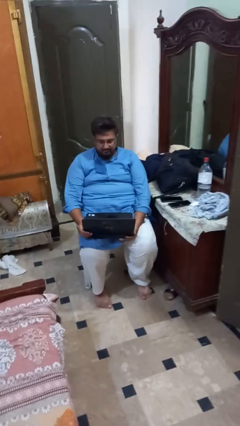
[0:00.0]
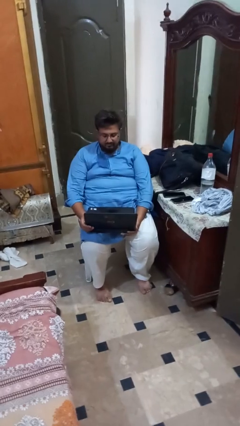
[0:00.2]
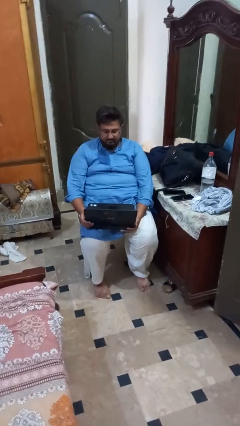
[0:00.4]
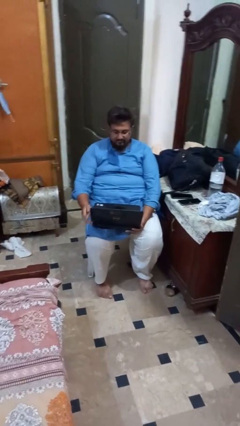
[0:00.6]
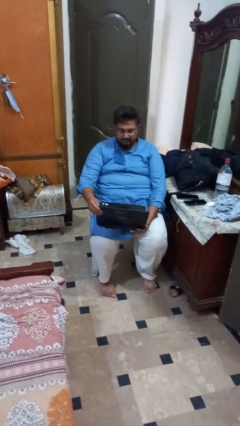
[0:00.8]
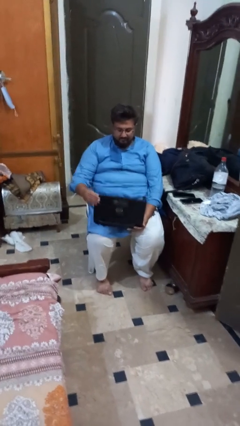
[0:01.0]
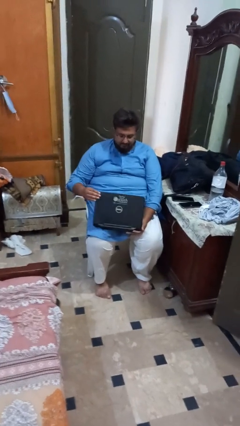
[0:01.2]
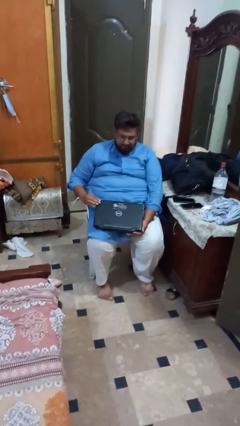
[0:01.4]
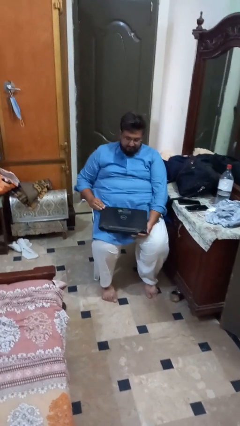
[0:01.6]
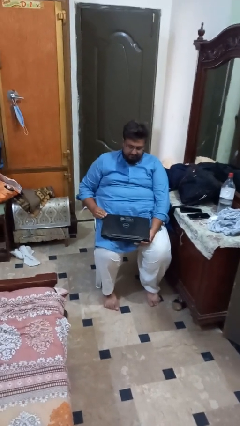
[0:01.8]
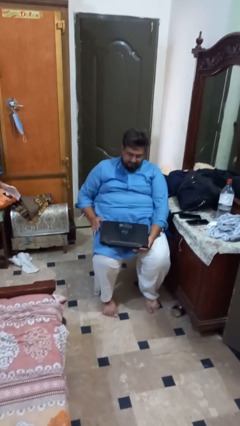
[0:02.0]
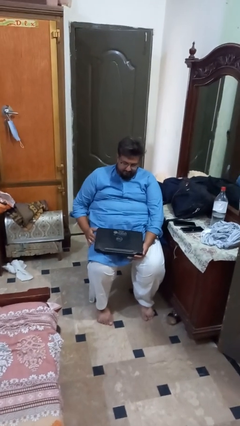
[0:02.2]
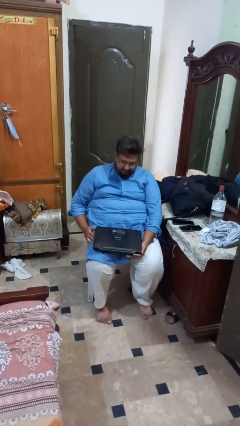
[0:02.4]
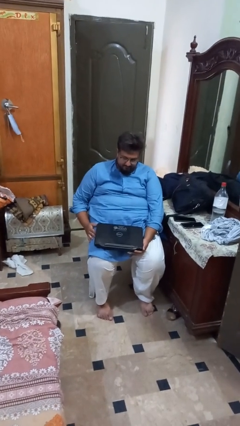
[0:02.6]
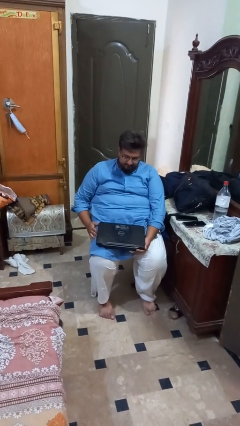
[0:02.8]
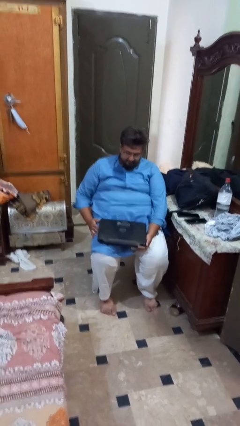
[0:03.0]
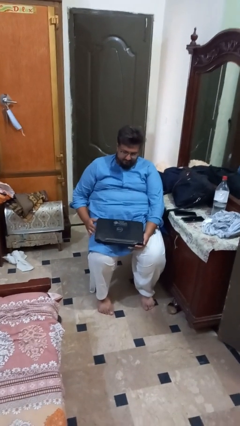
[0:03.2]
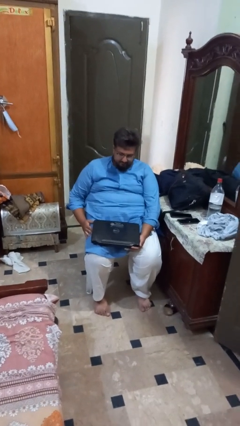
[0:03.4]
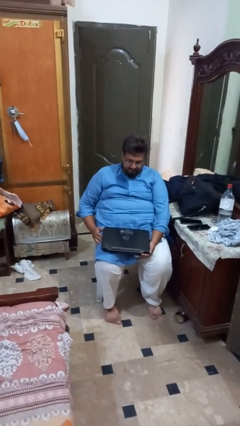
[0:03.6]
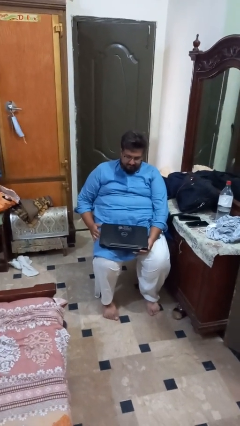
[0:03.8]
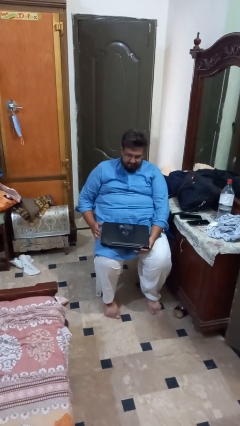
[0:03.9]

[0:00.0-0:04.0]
person closes laptop

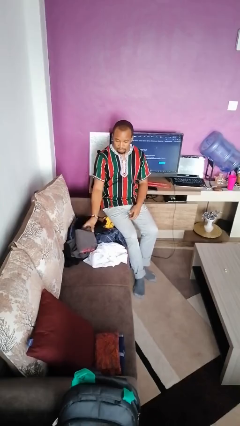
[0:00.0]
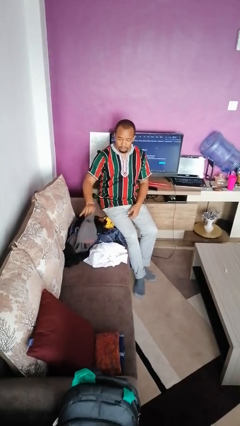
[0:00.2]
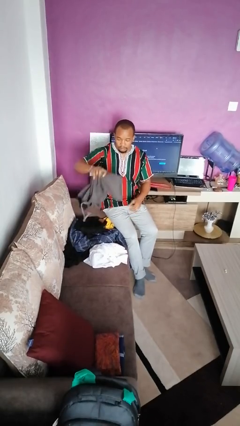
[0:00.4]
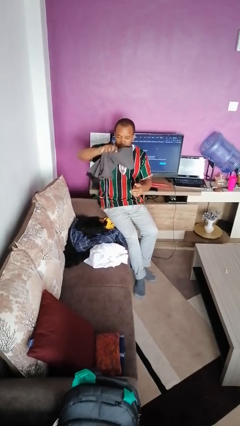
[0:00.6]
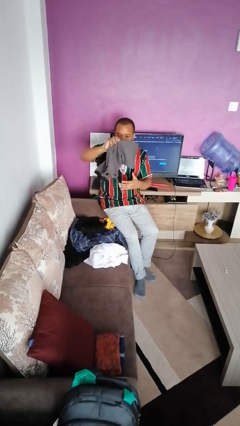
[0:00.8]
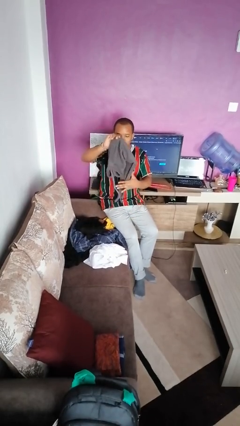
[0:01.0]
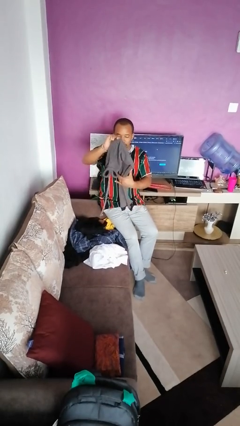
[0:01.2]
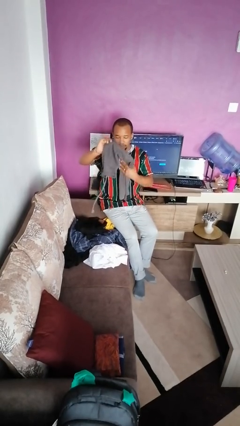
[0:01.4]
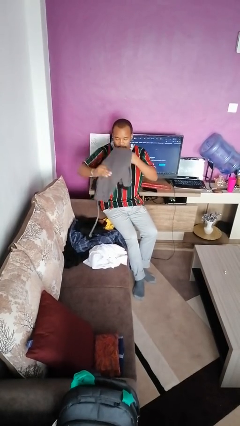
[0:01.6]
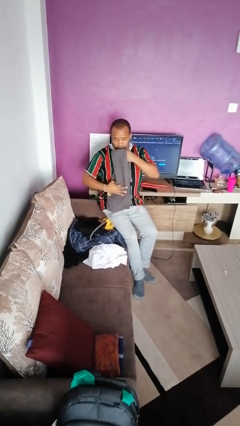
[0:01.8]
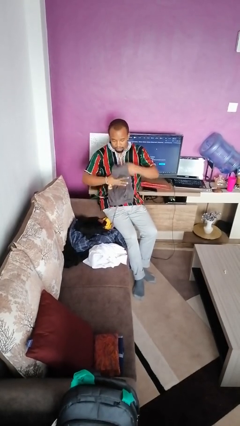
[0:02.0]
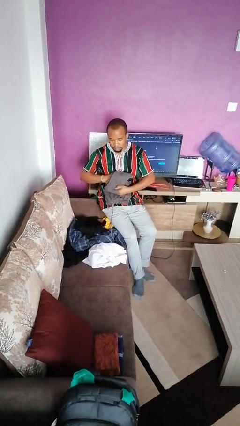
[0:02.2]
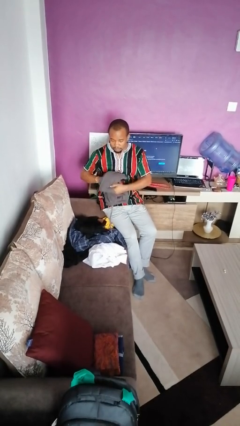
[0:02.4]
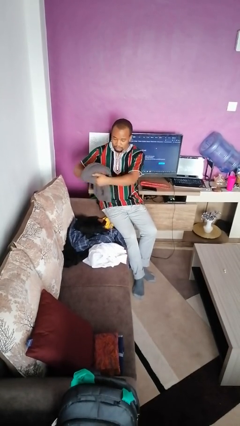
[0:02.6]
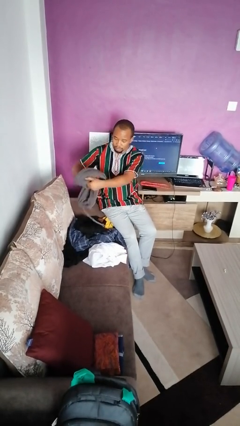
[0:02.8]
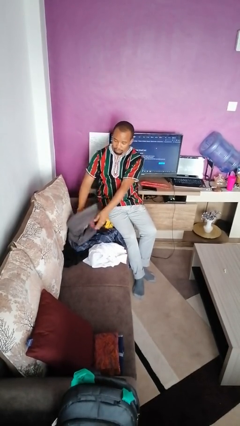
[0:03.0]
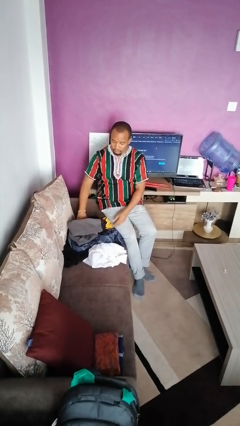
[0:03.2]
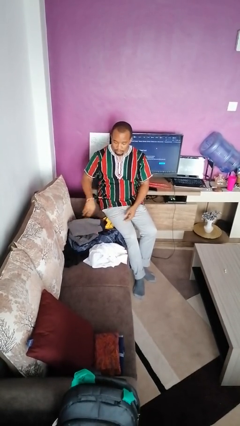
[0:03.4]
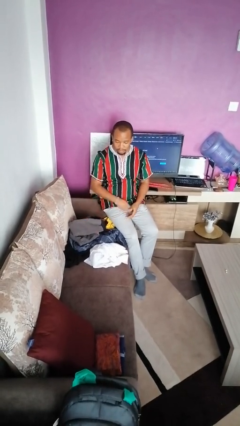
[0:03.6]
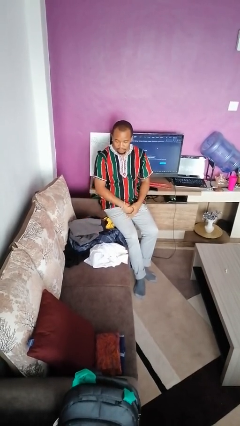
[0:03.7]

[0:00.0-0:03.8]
person folds pants

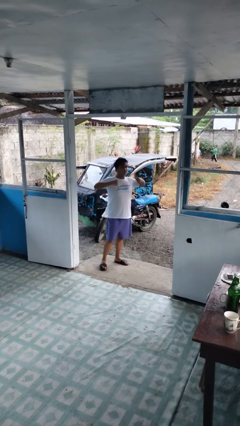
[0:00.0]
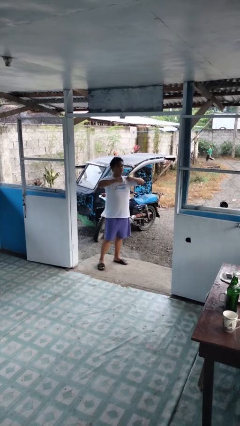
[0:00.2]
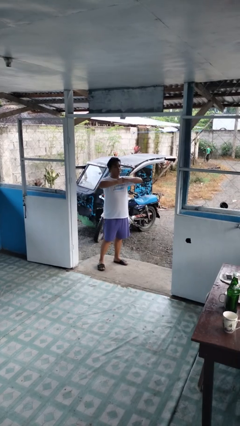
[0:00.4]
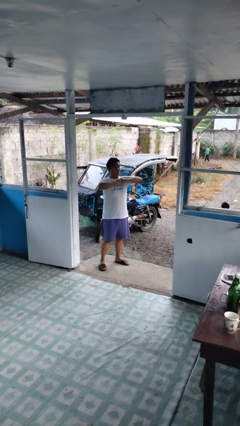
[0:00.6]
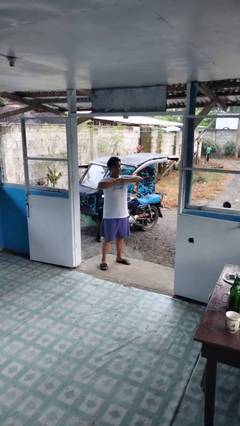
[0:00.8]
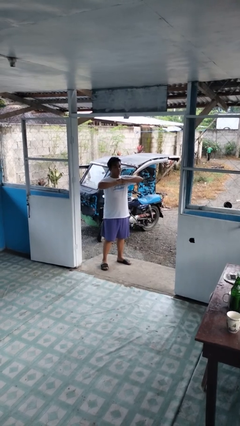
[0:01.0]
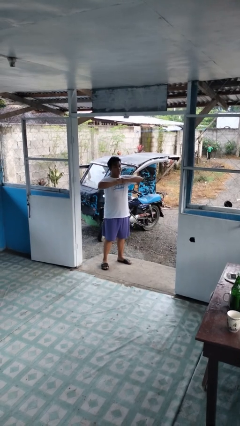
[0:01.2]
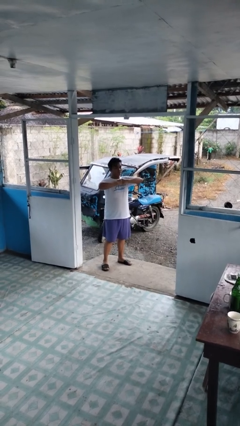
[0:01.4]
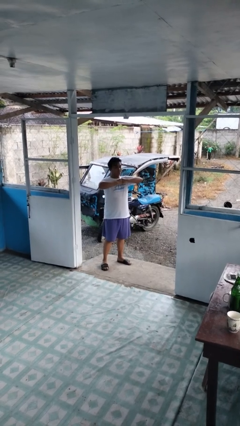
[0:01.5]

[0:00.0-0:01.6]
person gestures zoom out

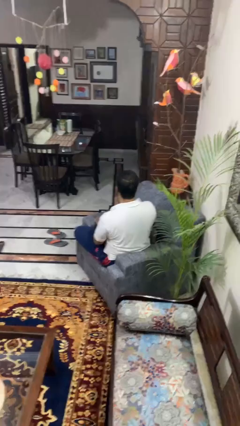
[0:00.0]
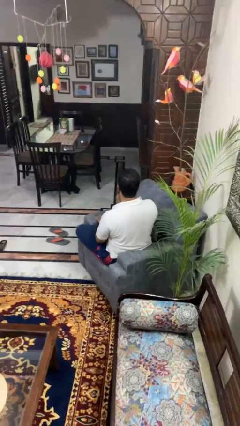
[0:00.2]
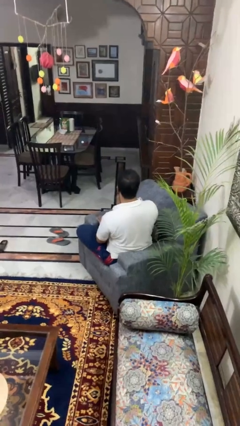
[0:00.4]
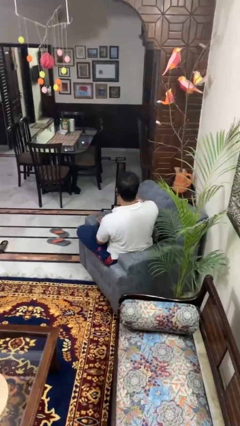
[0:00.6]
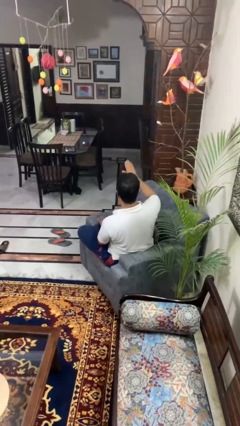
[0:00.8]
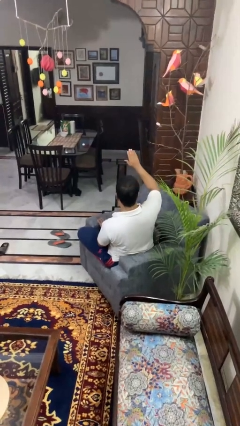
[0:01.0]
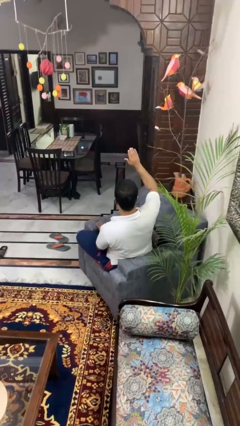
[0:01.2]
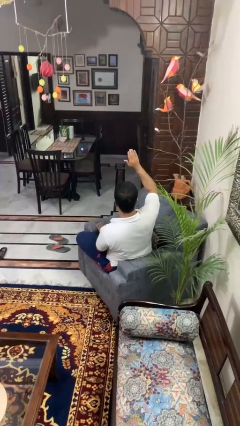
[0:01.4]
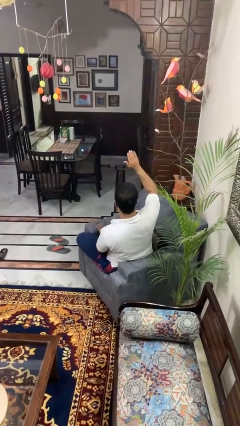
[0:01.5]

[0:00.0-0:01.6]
person gestures raise hand

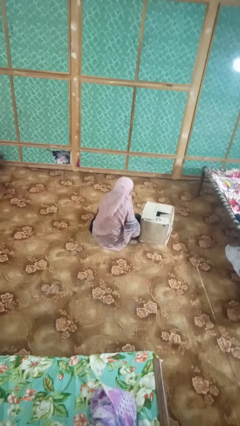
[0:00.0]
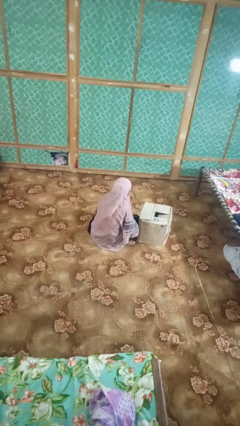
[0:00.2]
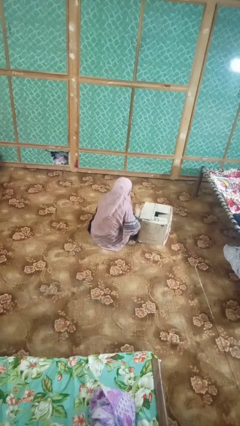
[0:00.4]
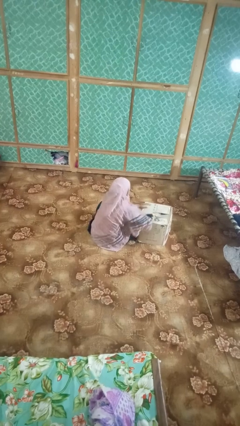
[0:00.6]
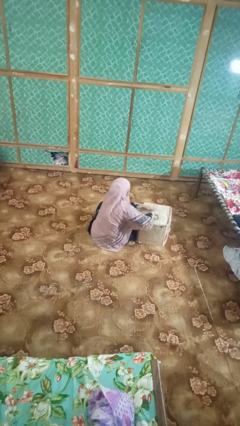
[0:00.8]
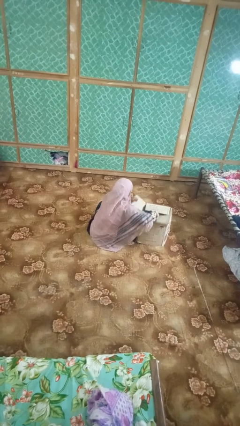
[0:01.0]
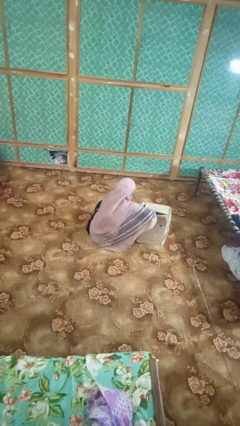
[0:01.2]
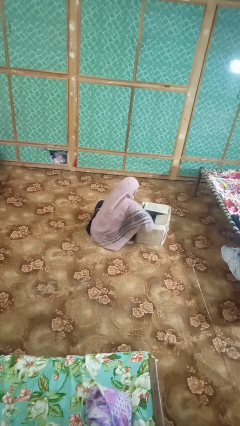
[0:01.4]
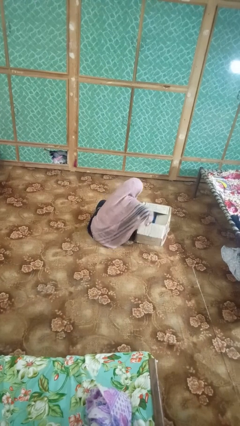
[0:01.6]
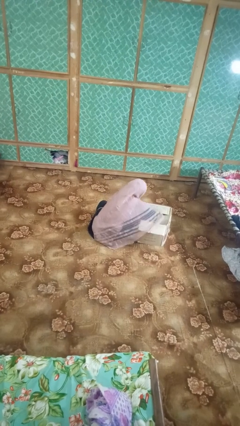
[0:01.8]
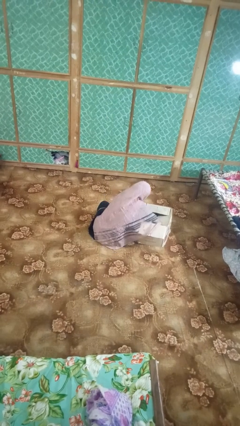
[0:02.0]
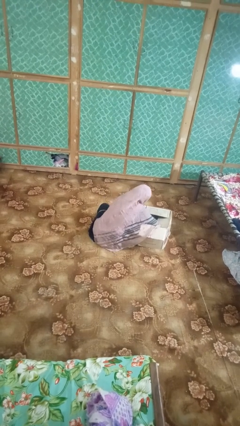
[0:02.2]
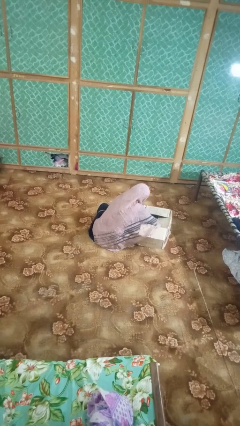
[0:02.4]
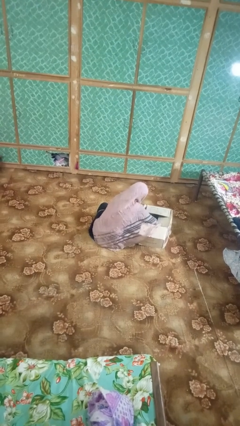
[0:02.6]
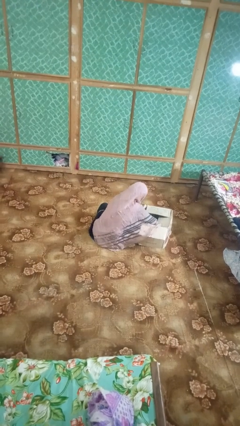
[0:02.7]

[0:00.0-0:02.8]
person searches in box

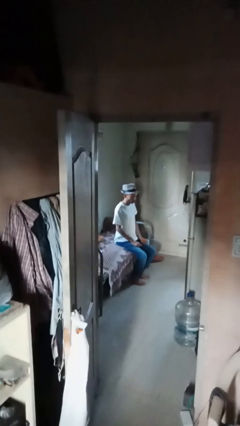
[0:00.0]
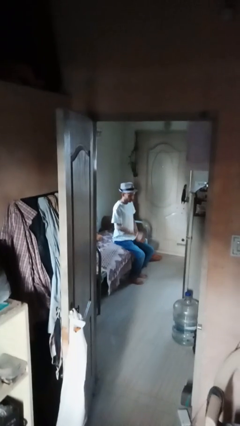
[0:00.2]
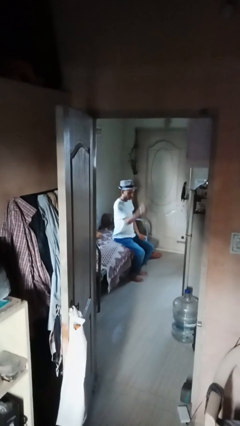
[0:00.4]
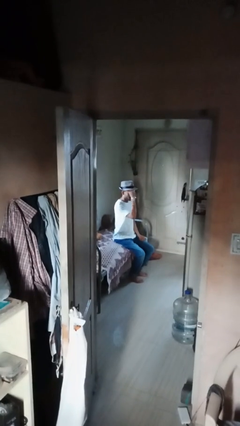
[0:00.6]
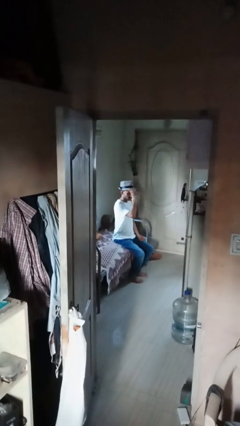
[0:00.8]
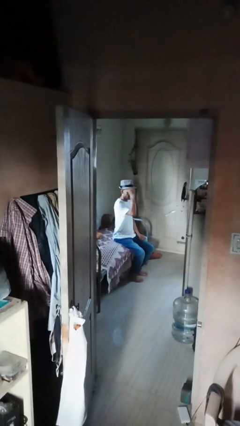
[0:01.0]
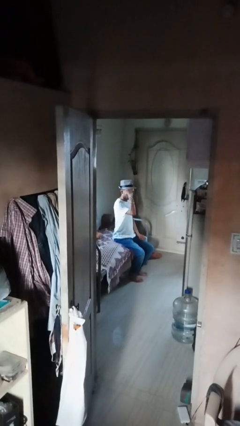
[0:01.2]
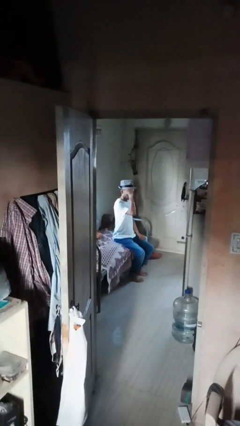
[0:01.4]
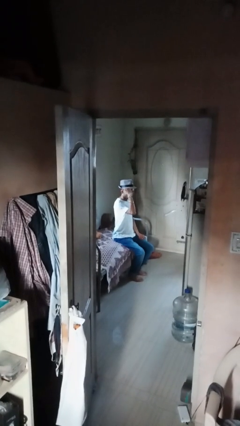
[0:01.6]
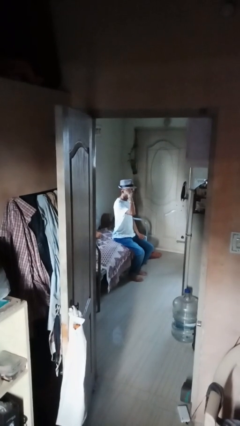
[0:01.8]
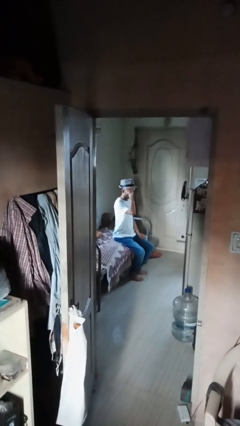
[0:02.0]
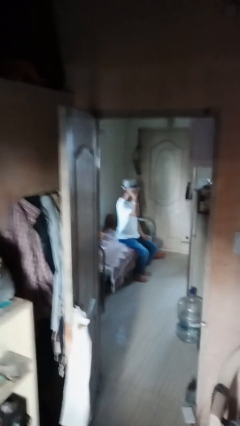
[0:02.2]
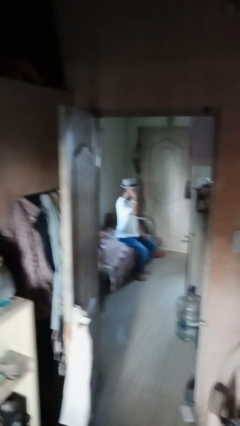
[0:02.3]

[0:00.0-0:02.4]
person gestures behind me

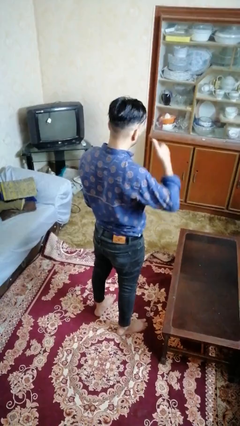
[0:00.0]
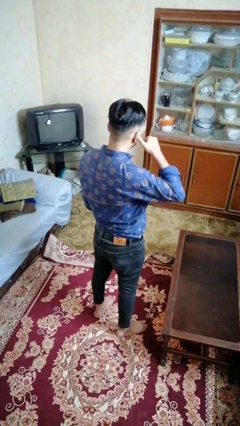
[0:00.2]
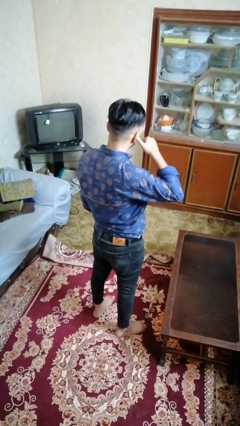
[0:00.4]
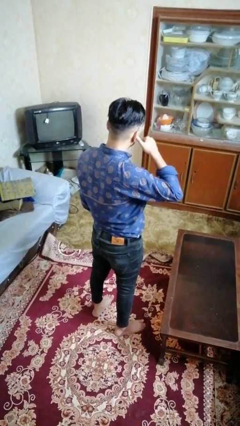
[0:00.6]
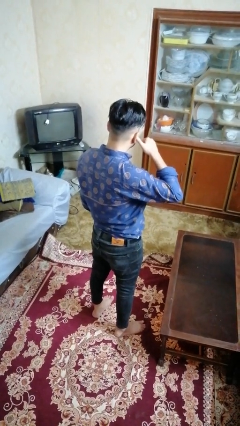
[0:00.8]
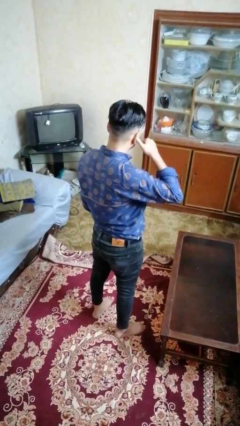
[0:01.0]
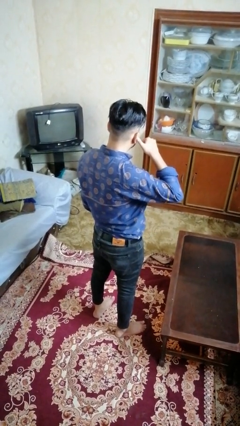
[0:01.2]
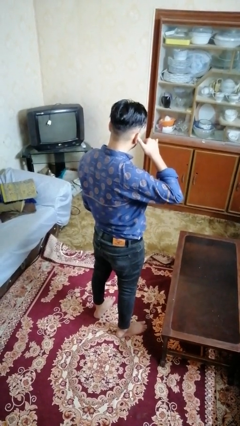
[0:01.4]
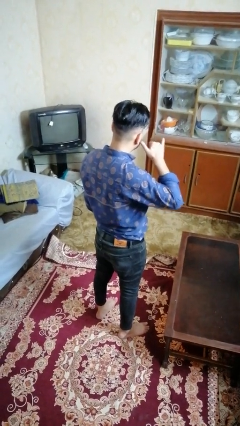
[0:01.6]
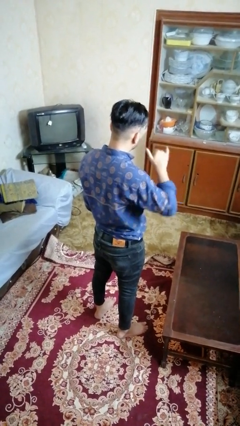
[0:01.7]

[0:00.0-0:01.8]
person gestures call me
